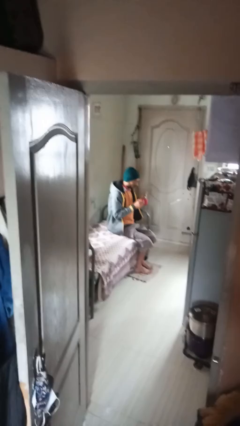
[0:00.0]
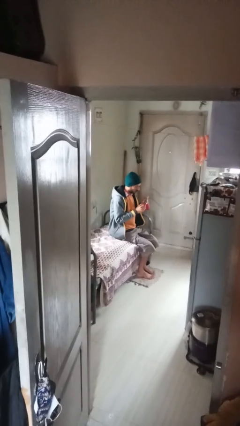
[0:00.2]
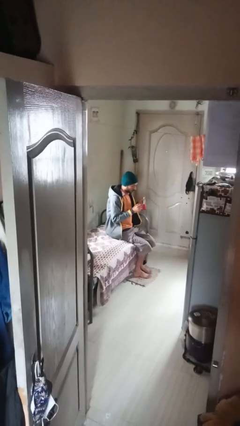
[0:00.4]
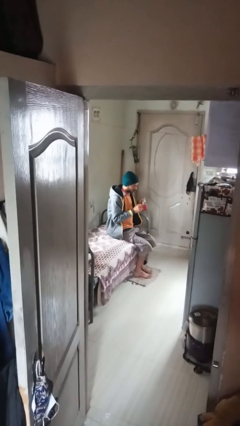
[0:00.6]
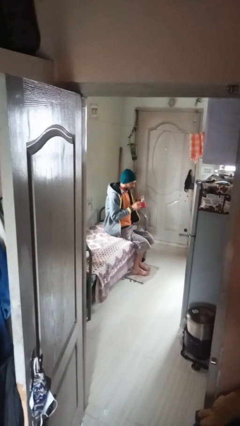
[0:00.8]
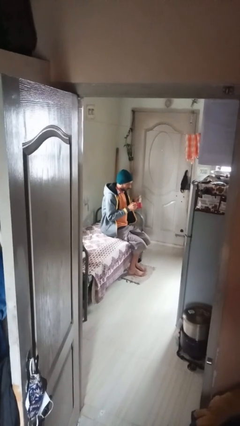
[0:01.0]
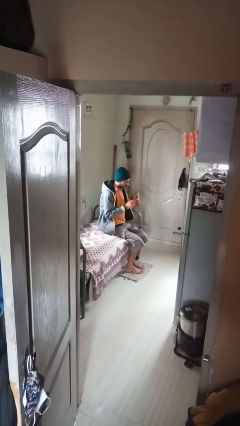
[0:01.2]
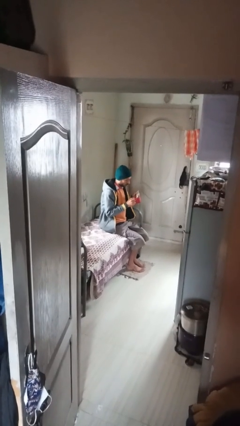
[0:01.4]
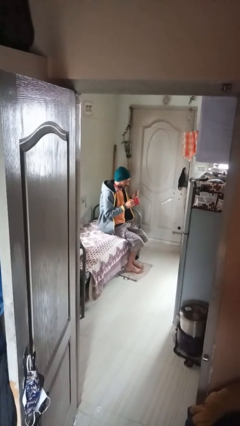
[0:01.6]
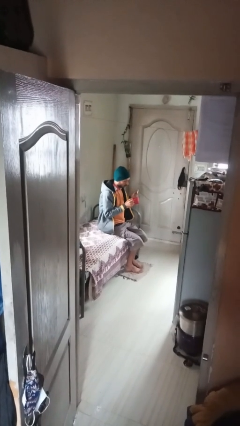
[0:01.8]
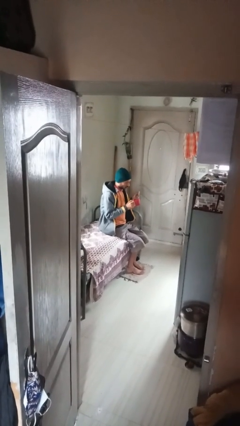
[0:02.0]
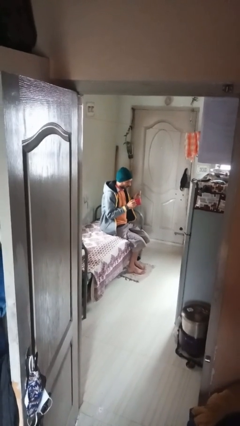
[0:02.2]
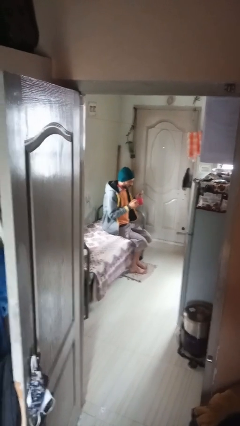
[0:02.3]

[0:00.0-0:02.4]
person stirs mug

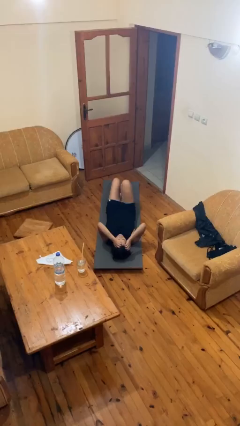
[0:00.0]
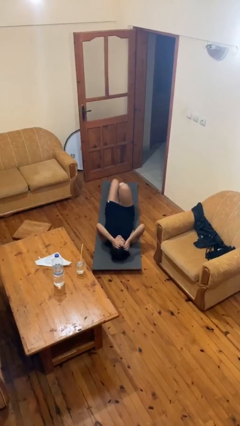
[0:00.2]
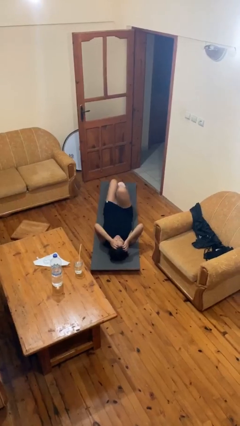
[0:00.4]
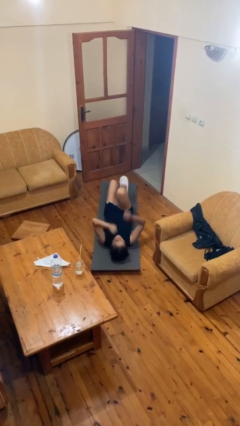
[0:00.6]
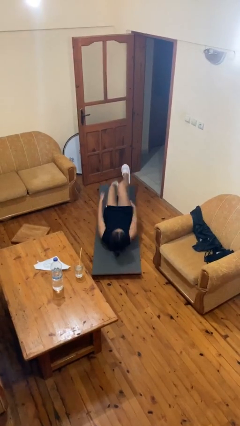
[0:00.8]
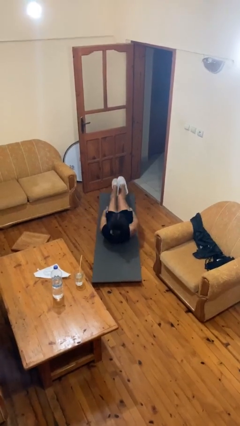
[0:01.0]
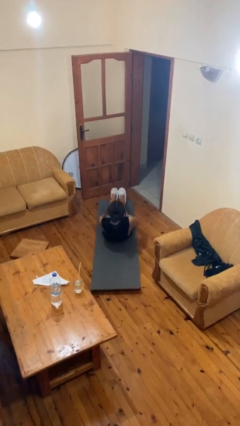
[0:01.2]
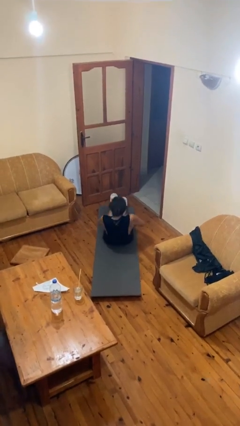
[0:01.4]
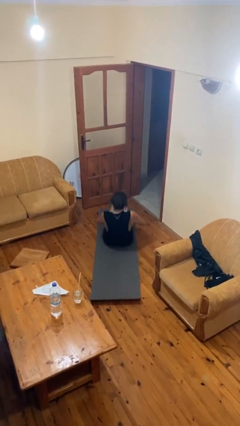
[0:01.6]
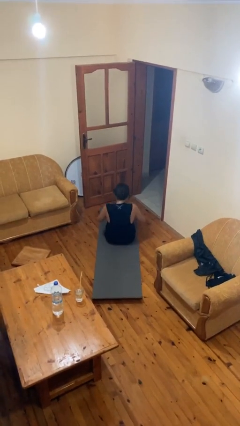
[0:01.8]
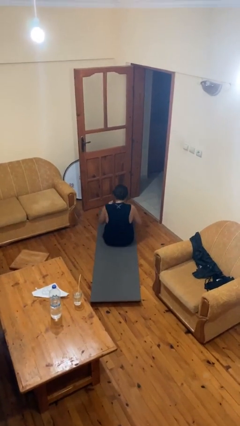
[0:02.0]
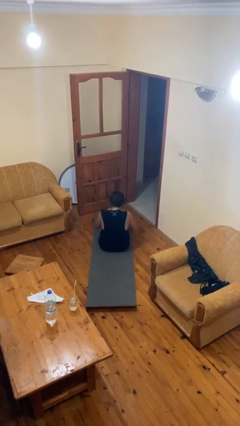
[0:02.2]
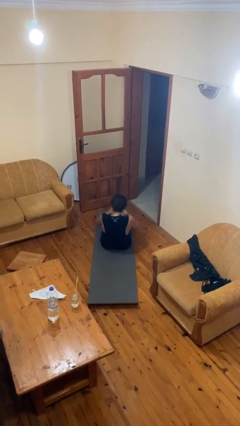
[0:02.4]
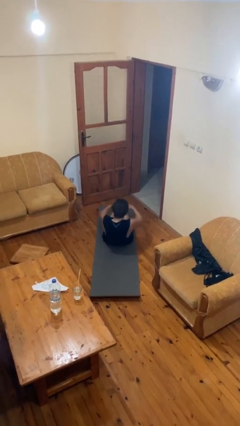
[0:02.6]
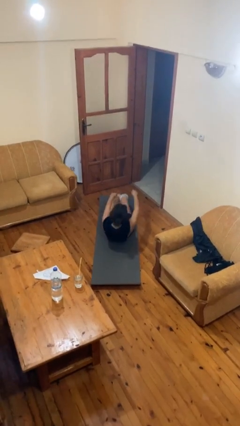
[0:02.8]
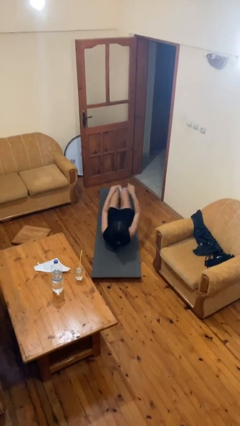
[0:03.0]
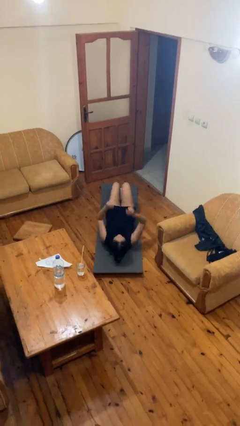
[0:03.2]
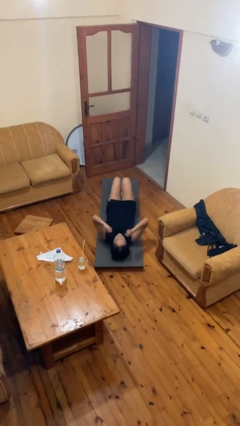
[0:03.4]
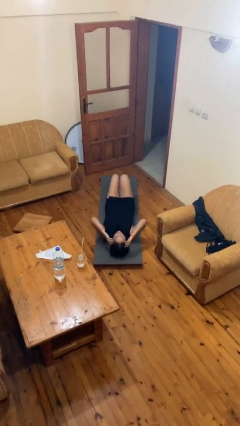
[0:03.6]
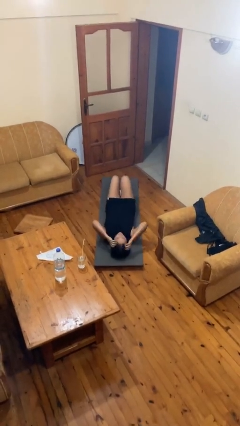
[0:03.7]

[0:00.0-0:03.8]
person exercises with situp

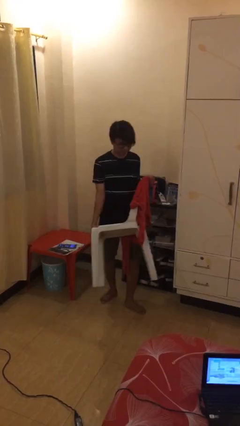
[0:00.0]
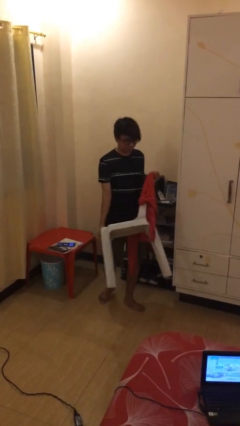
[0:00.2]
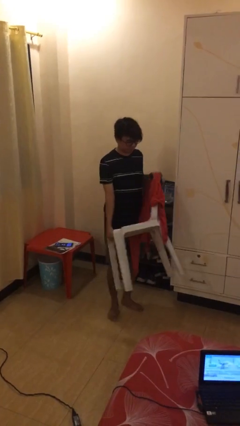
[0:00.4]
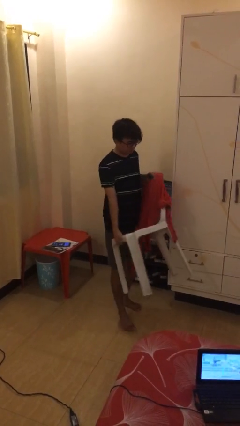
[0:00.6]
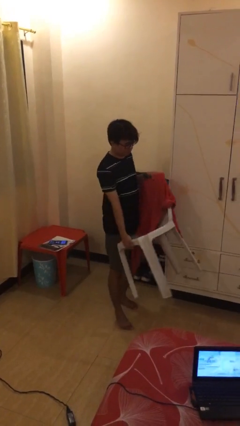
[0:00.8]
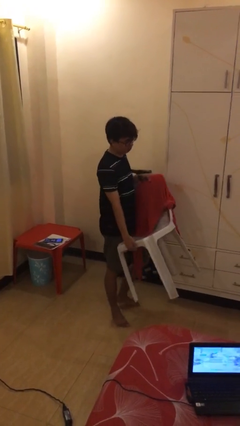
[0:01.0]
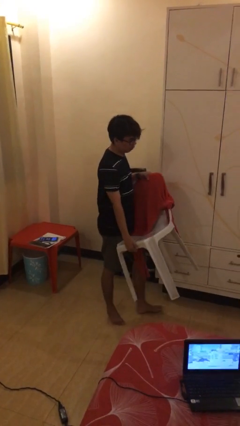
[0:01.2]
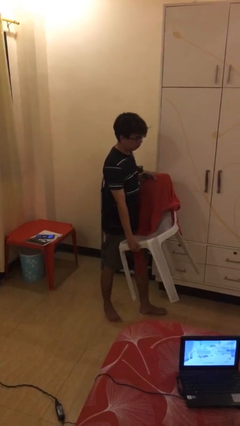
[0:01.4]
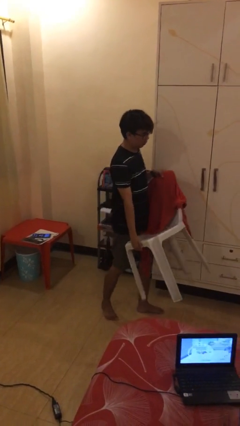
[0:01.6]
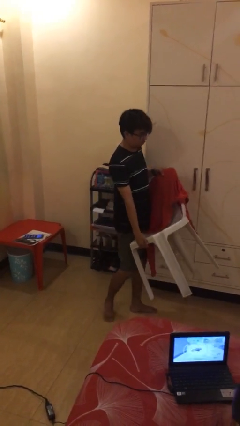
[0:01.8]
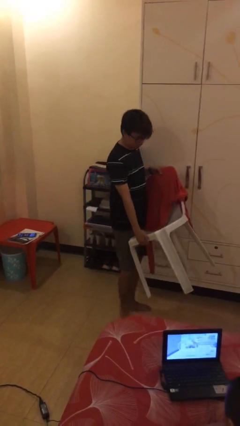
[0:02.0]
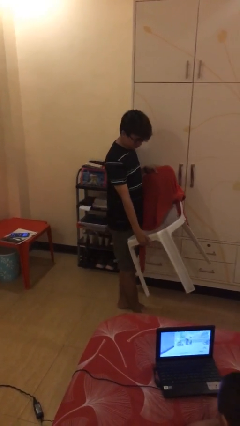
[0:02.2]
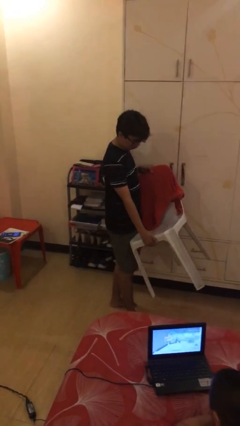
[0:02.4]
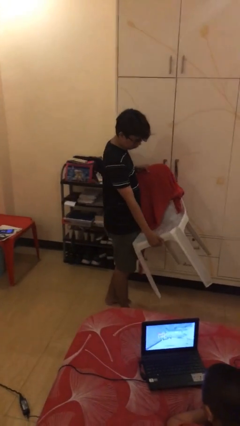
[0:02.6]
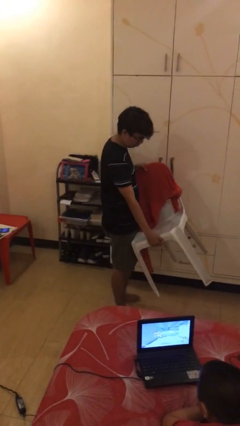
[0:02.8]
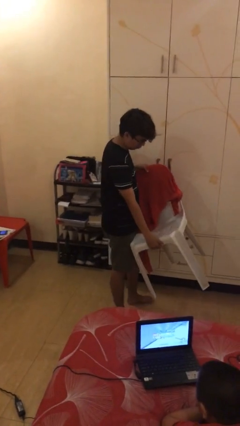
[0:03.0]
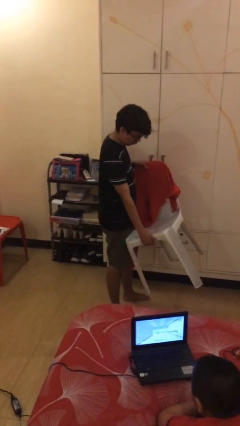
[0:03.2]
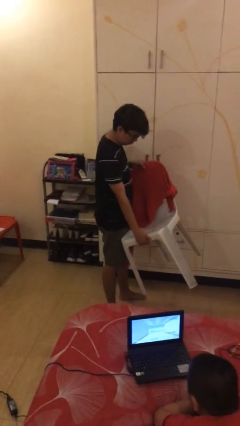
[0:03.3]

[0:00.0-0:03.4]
person carries heavy object

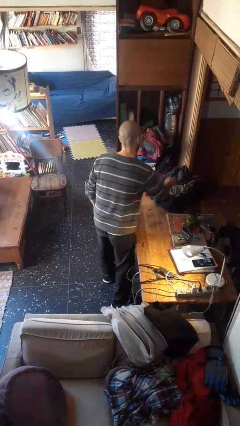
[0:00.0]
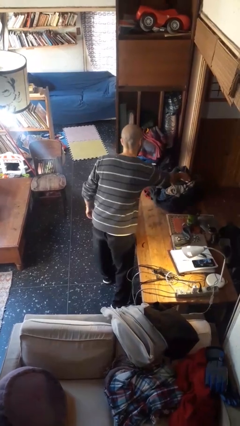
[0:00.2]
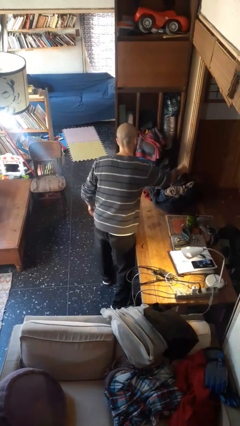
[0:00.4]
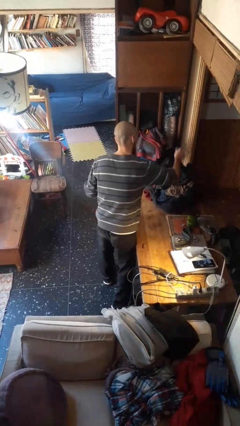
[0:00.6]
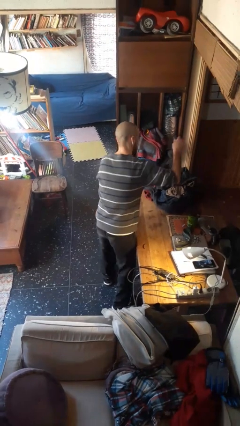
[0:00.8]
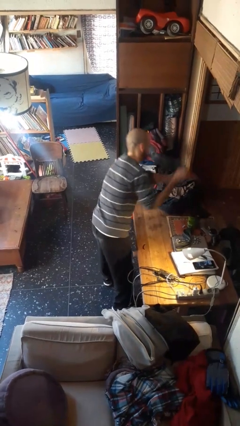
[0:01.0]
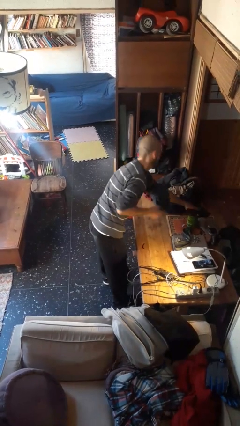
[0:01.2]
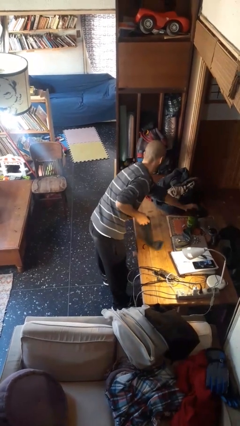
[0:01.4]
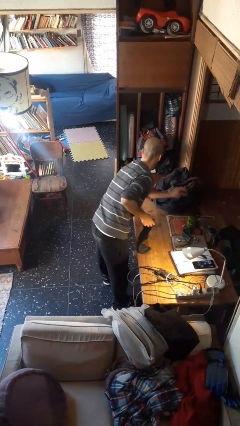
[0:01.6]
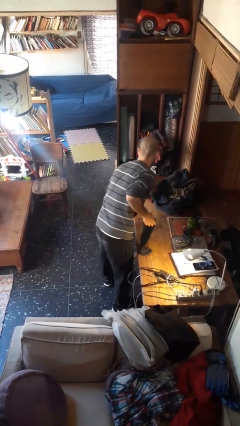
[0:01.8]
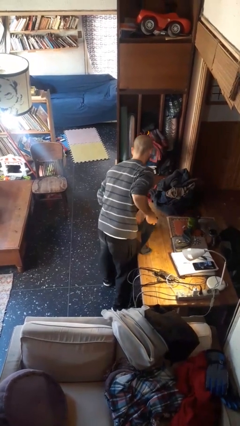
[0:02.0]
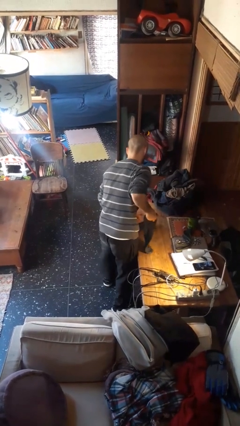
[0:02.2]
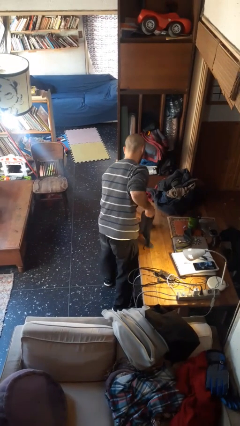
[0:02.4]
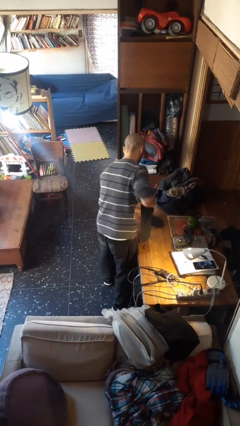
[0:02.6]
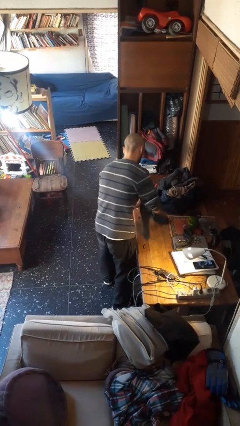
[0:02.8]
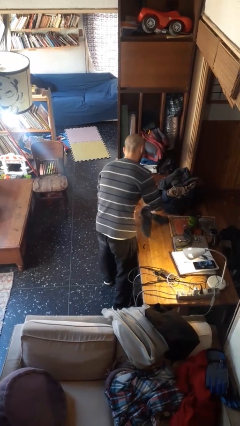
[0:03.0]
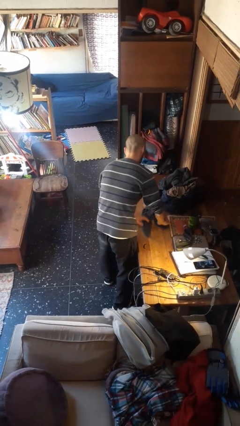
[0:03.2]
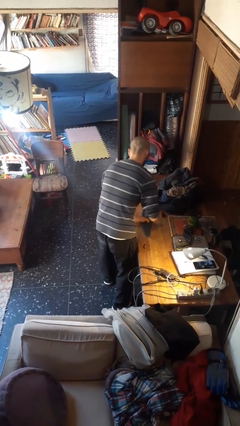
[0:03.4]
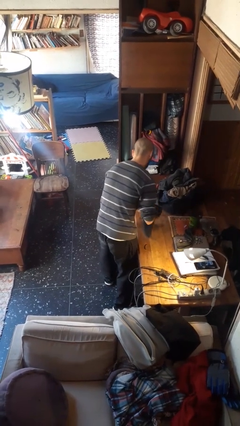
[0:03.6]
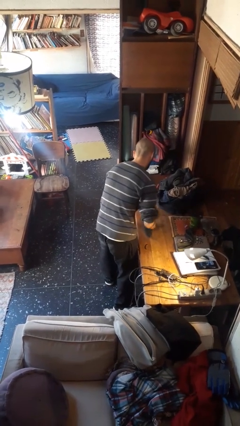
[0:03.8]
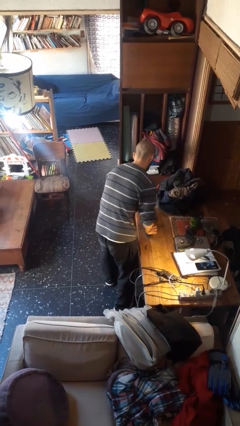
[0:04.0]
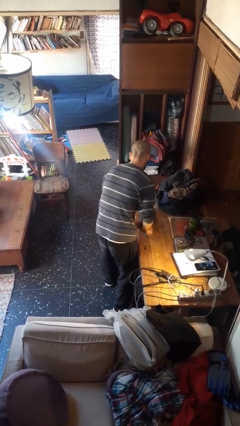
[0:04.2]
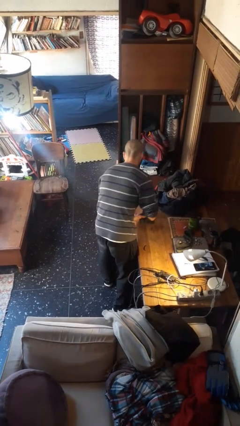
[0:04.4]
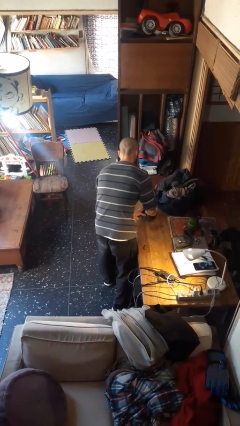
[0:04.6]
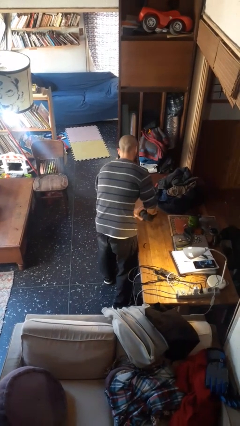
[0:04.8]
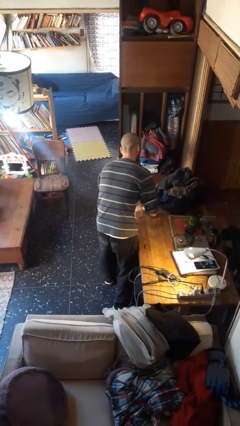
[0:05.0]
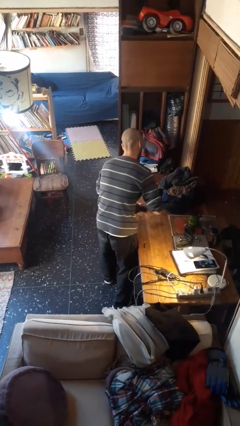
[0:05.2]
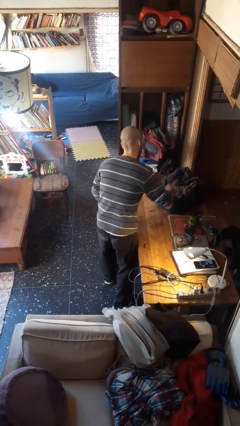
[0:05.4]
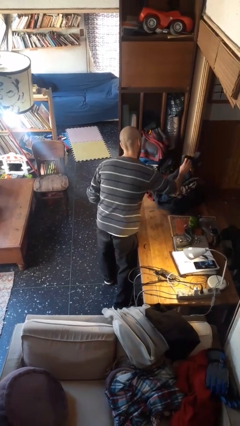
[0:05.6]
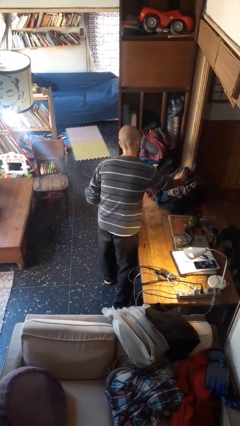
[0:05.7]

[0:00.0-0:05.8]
person folds socks

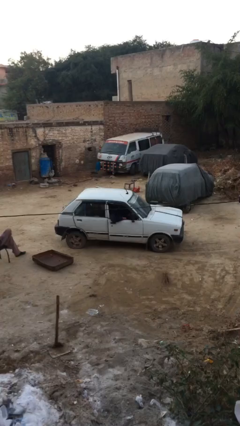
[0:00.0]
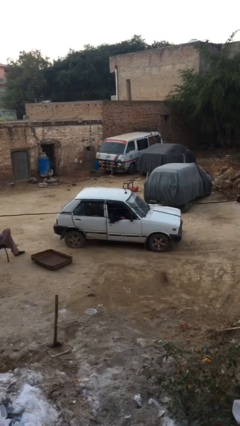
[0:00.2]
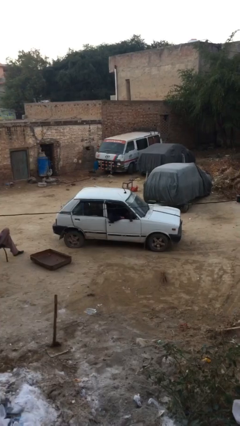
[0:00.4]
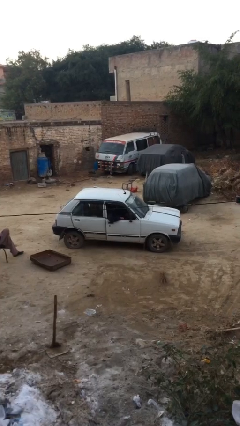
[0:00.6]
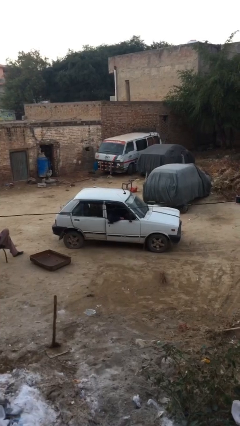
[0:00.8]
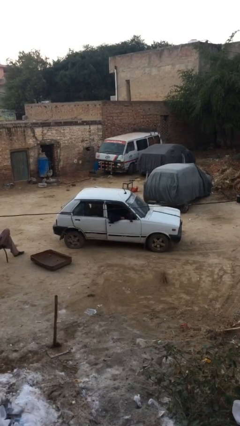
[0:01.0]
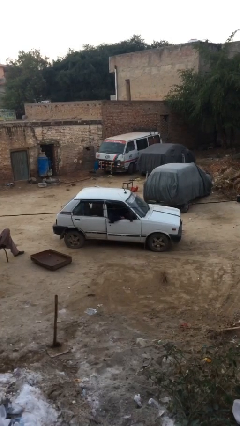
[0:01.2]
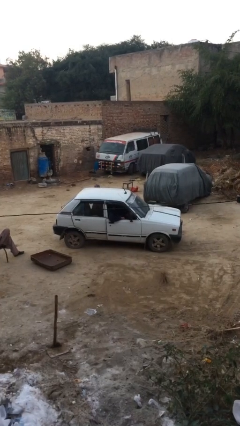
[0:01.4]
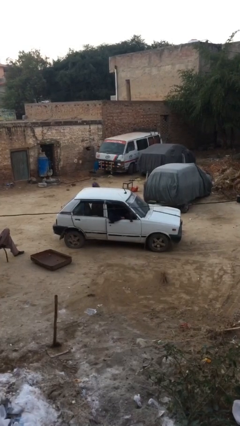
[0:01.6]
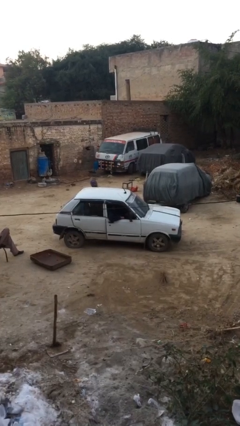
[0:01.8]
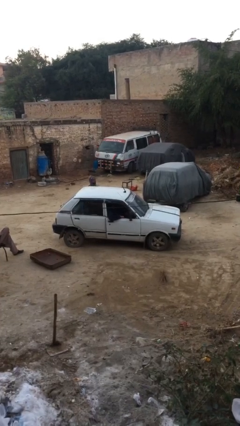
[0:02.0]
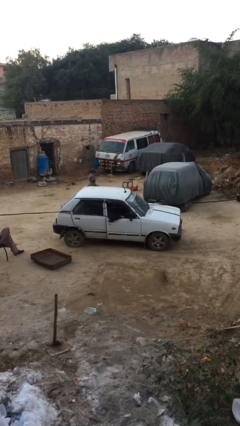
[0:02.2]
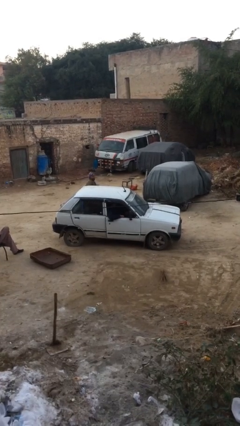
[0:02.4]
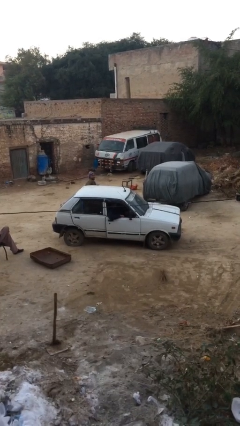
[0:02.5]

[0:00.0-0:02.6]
car drops off person
